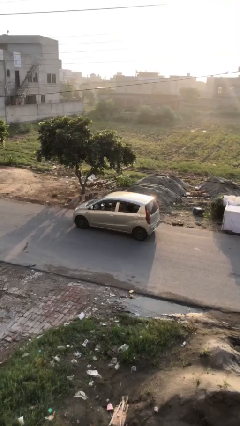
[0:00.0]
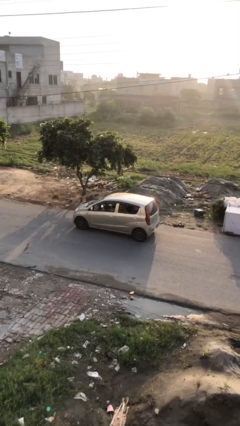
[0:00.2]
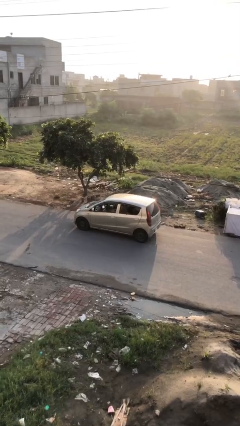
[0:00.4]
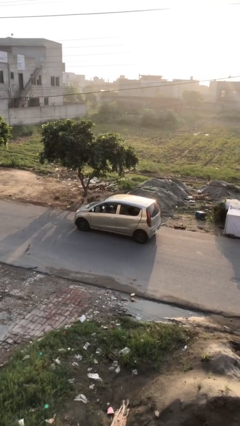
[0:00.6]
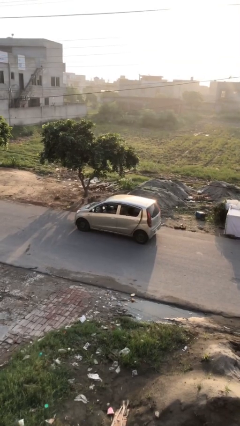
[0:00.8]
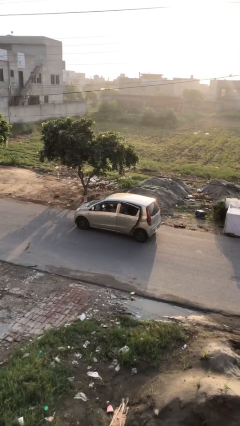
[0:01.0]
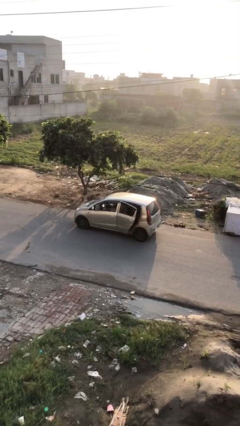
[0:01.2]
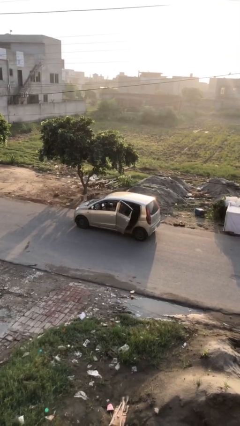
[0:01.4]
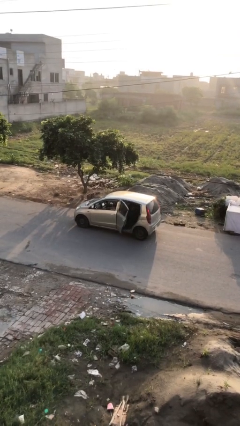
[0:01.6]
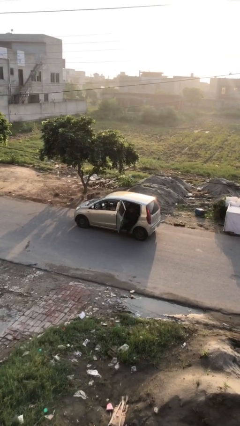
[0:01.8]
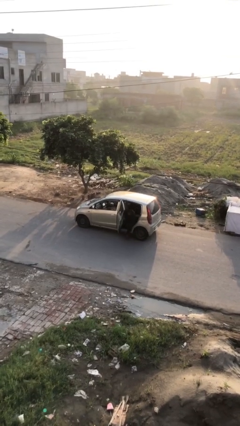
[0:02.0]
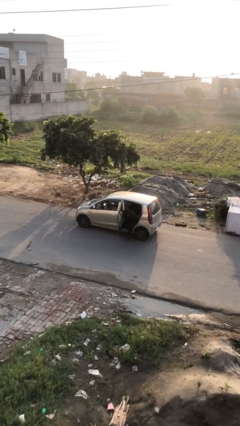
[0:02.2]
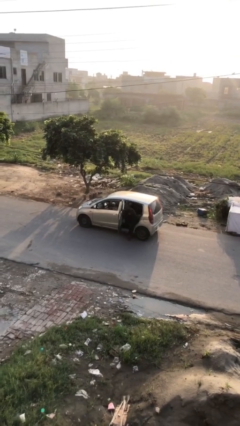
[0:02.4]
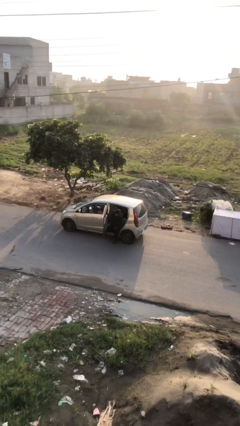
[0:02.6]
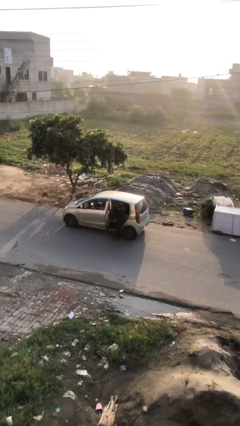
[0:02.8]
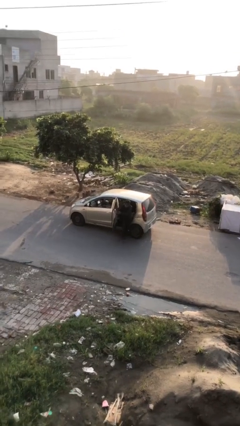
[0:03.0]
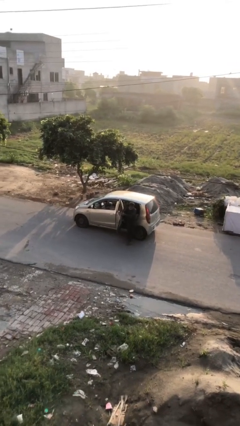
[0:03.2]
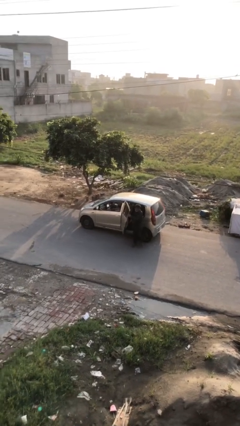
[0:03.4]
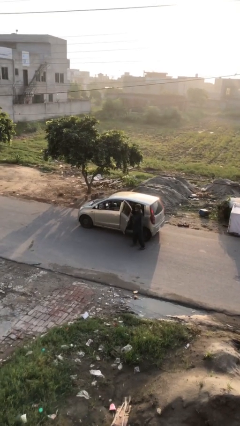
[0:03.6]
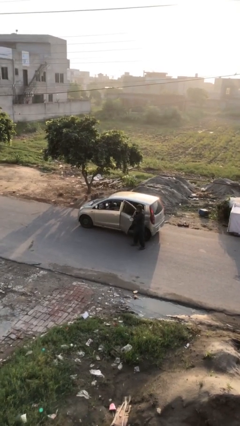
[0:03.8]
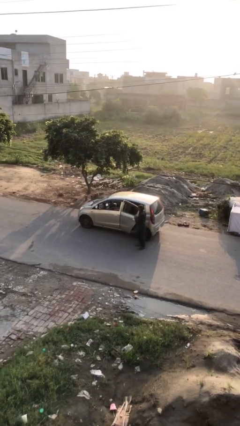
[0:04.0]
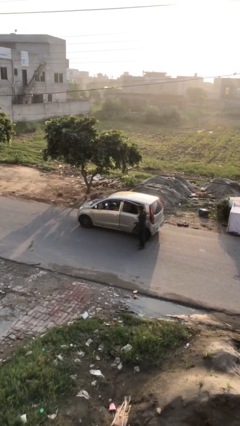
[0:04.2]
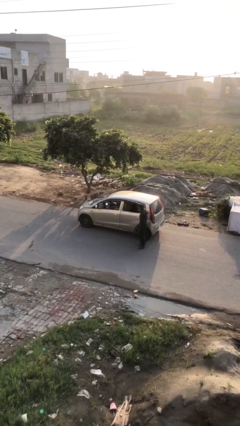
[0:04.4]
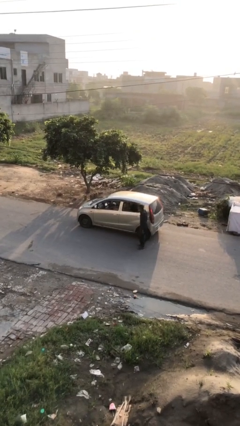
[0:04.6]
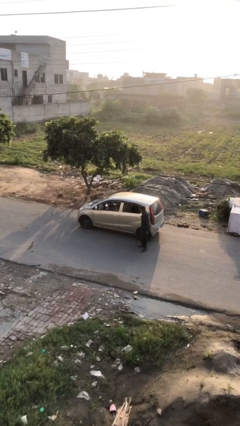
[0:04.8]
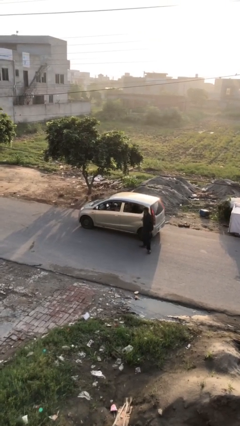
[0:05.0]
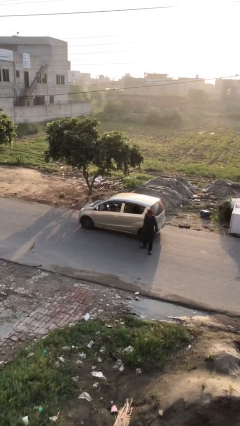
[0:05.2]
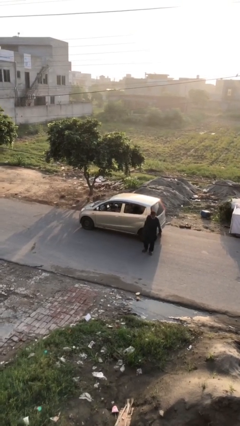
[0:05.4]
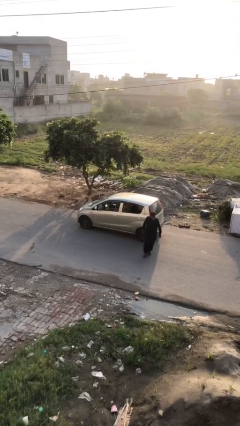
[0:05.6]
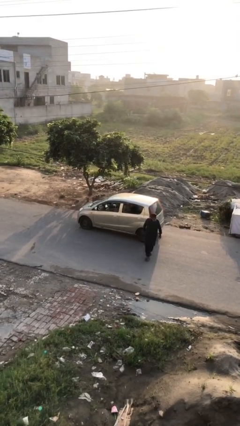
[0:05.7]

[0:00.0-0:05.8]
car drops off person

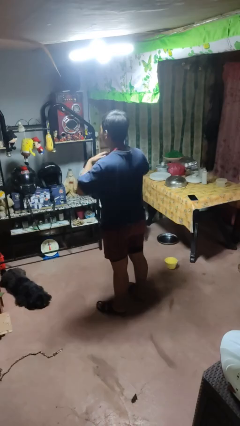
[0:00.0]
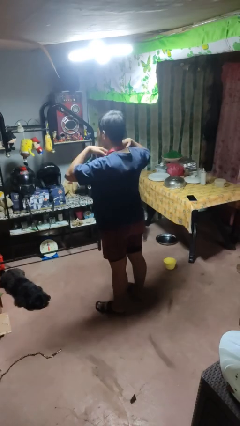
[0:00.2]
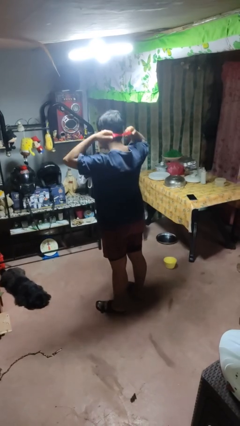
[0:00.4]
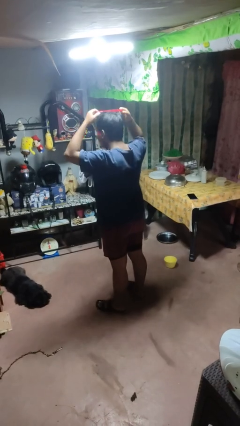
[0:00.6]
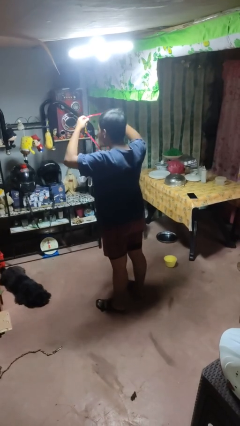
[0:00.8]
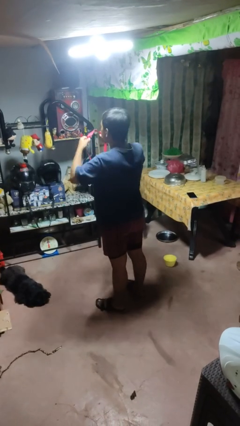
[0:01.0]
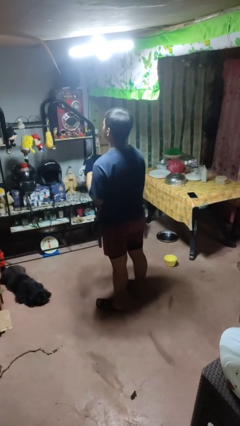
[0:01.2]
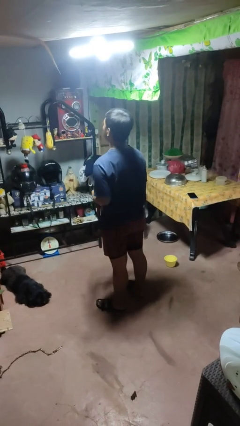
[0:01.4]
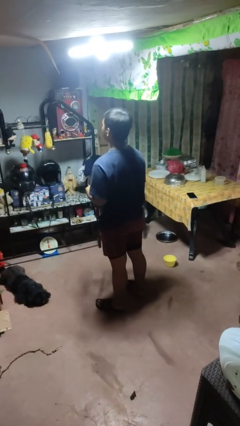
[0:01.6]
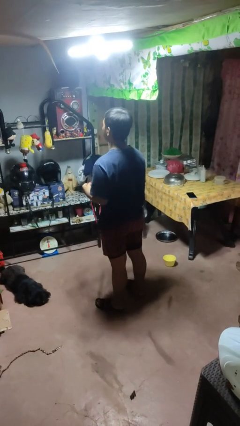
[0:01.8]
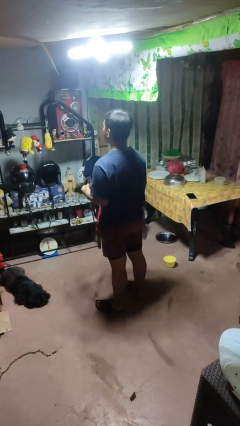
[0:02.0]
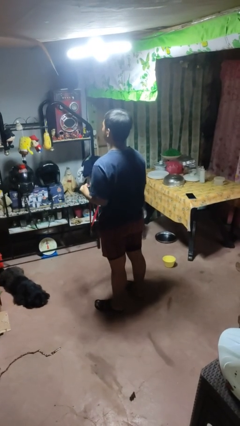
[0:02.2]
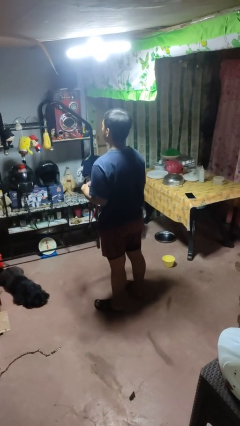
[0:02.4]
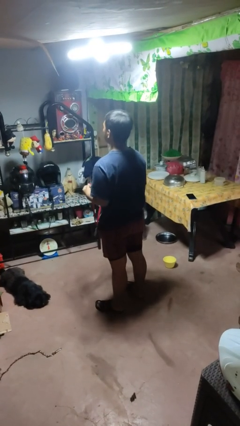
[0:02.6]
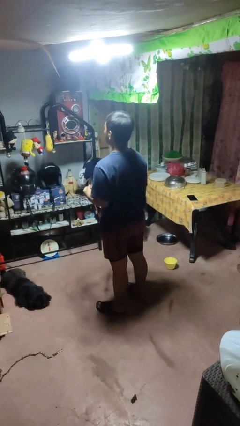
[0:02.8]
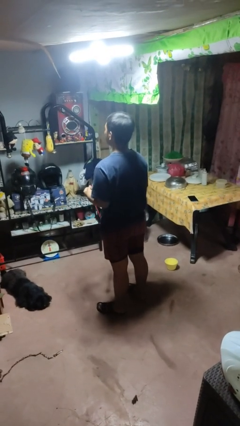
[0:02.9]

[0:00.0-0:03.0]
person takes off necklace

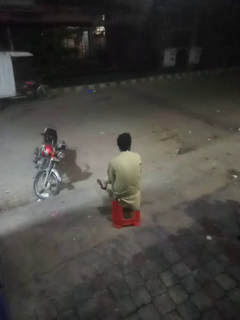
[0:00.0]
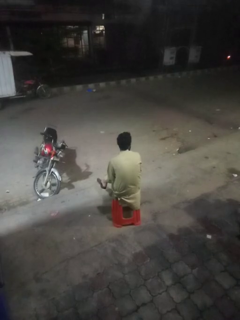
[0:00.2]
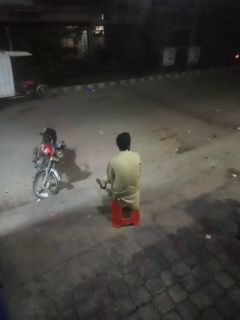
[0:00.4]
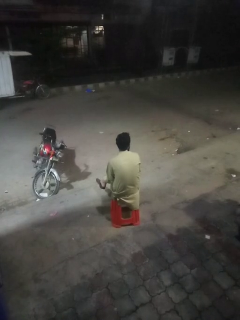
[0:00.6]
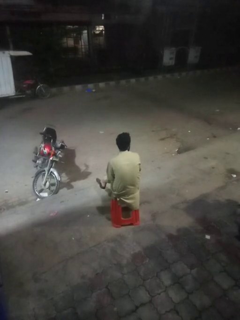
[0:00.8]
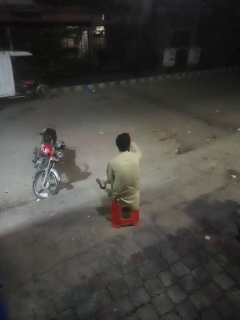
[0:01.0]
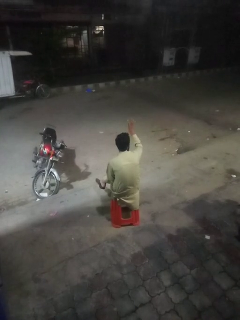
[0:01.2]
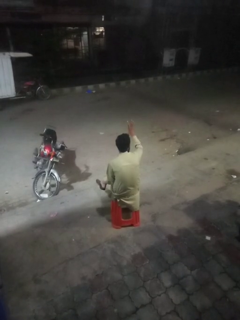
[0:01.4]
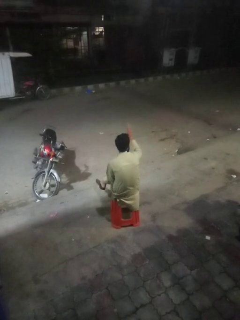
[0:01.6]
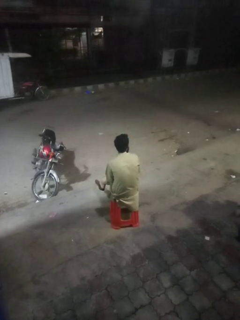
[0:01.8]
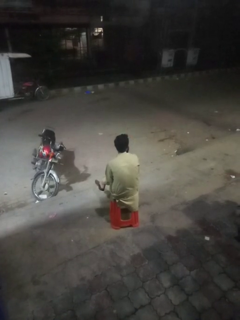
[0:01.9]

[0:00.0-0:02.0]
person gestures number four

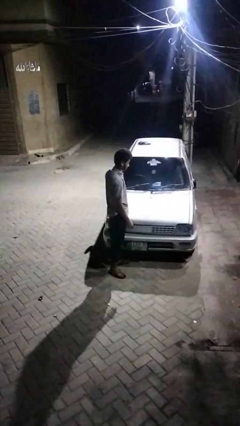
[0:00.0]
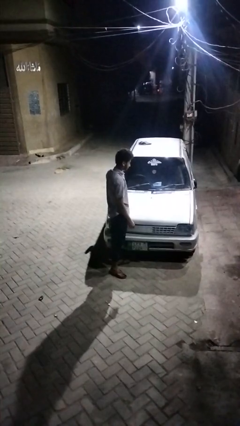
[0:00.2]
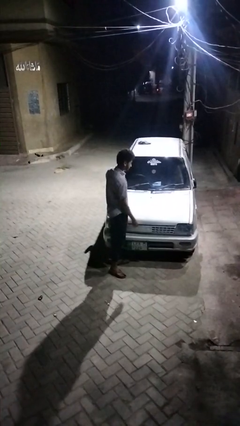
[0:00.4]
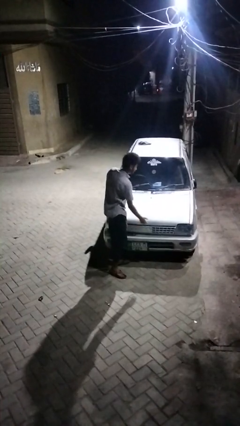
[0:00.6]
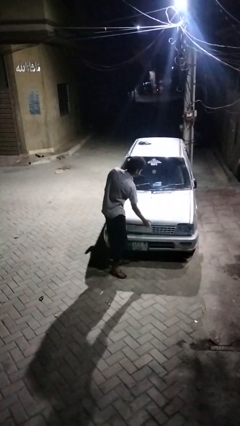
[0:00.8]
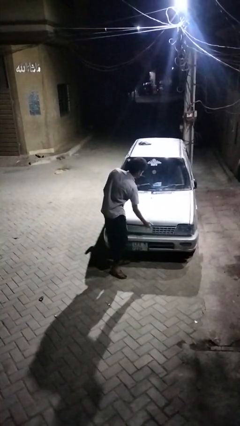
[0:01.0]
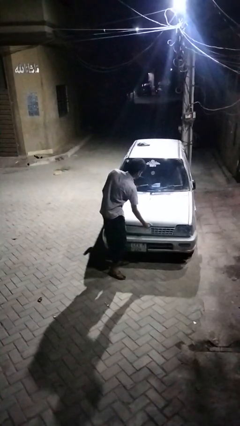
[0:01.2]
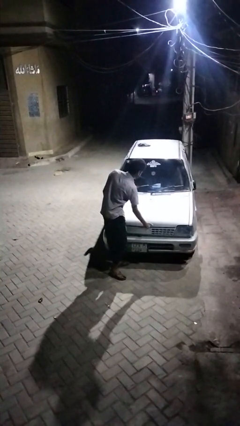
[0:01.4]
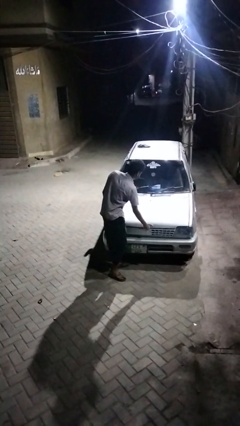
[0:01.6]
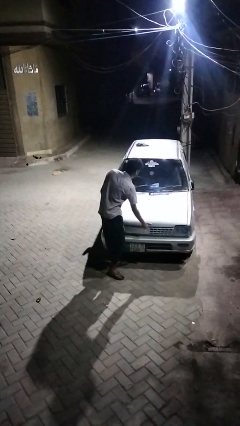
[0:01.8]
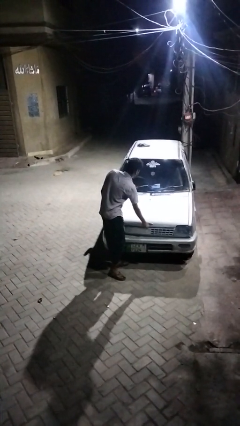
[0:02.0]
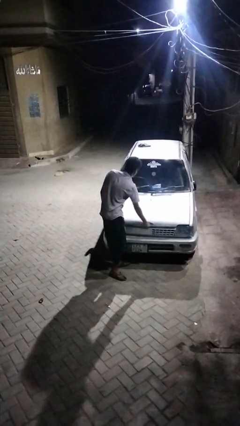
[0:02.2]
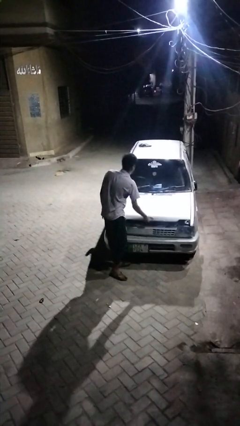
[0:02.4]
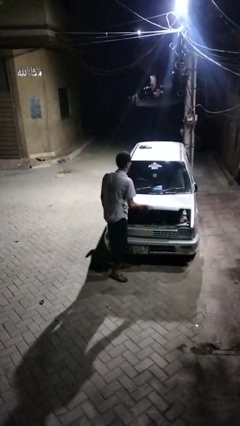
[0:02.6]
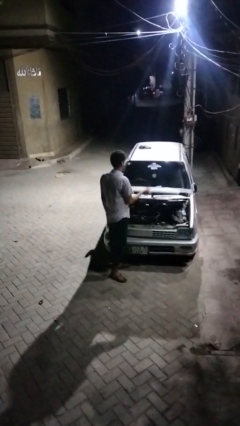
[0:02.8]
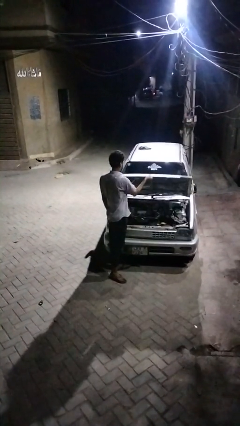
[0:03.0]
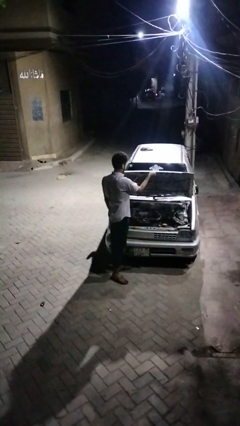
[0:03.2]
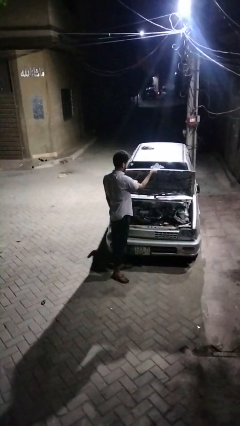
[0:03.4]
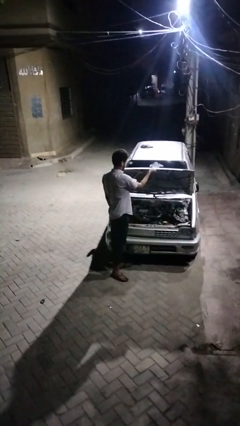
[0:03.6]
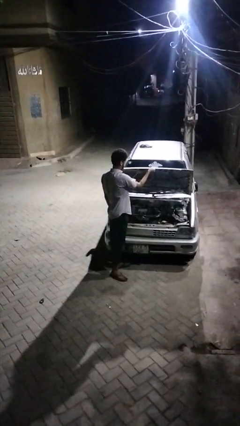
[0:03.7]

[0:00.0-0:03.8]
person opens car hood

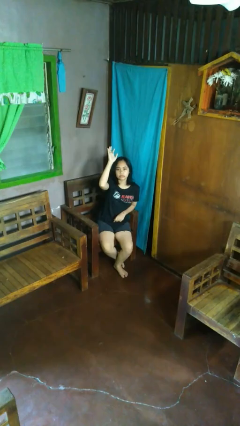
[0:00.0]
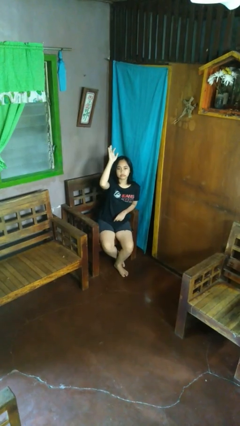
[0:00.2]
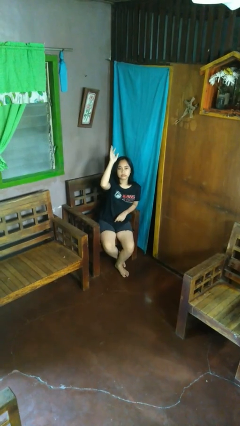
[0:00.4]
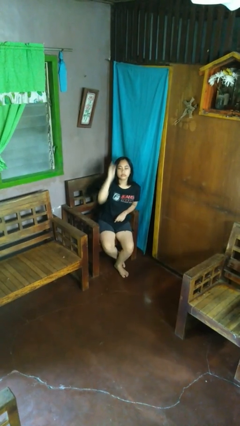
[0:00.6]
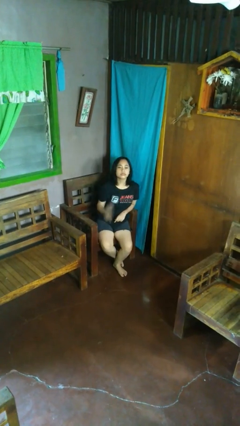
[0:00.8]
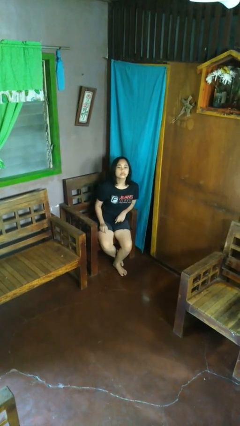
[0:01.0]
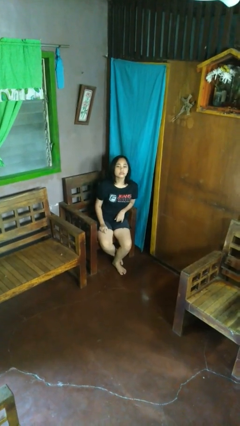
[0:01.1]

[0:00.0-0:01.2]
person gestures lower hand

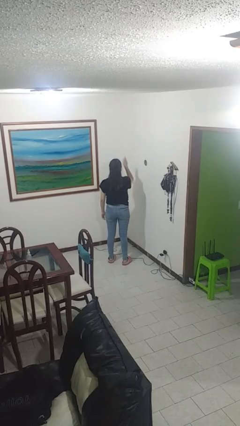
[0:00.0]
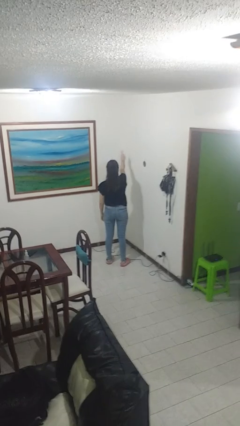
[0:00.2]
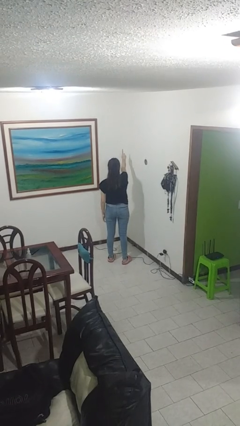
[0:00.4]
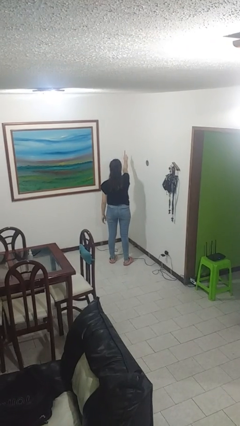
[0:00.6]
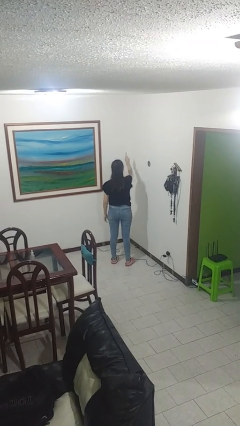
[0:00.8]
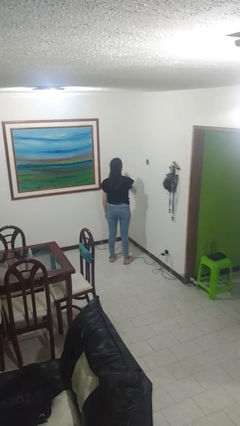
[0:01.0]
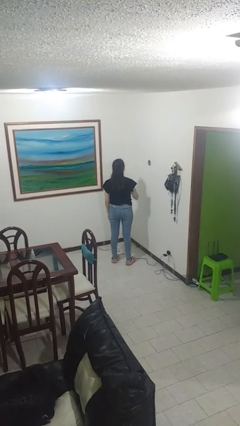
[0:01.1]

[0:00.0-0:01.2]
person gestures number one

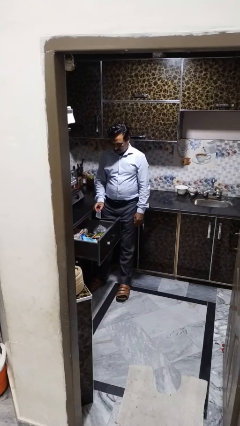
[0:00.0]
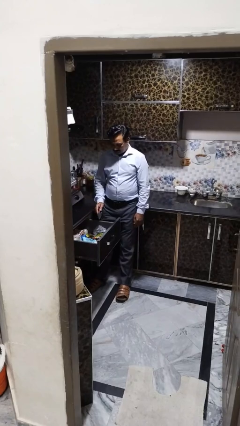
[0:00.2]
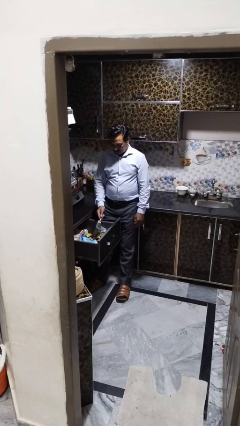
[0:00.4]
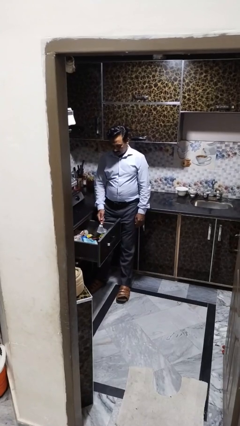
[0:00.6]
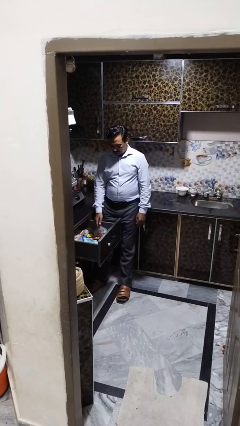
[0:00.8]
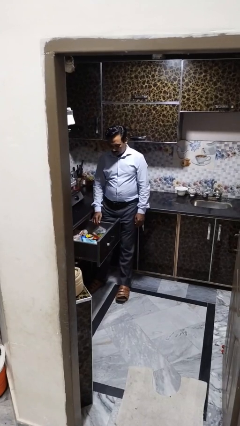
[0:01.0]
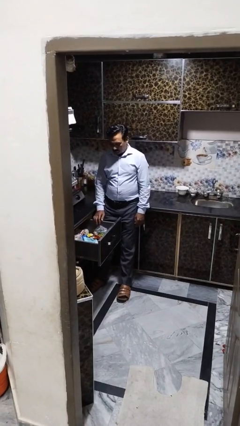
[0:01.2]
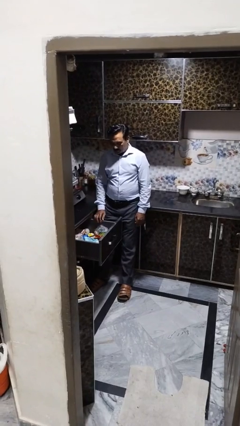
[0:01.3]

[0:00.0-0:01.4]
person puts object into kitchen drawer
